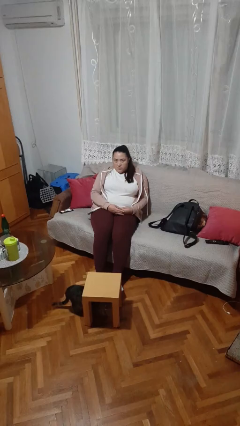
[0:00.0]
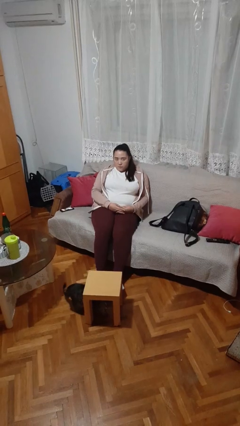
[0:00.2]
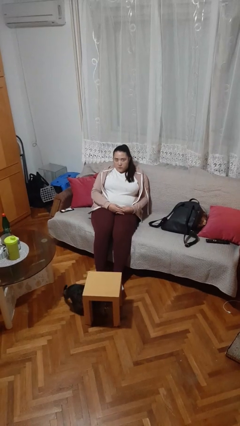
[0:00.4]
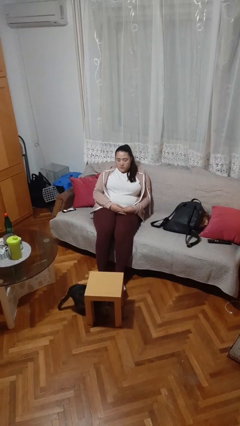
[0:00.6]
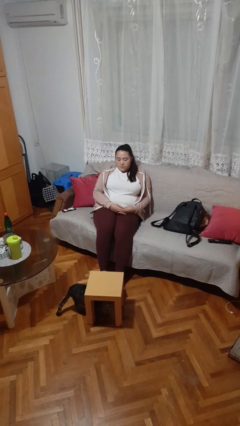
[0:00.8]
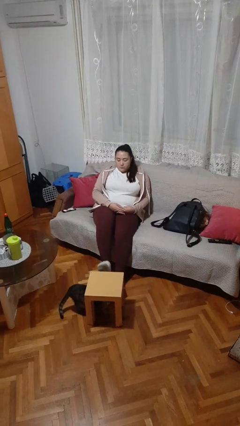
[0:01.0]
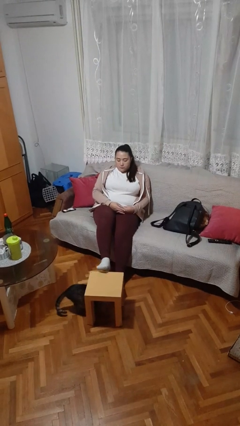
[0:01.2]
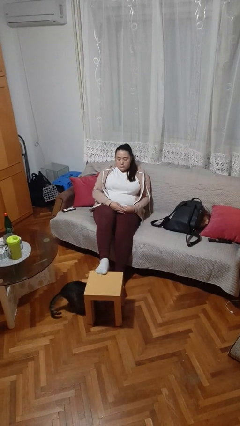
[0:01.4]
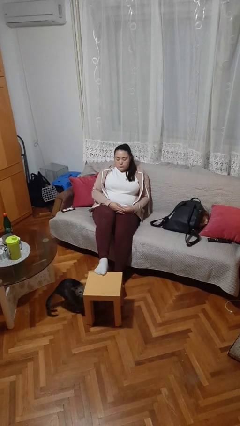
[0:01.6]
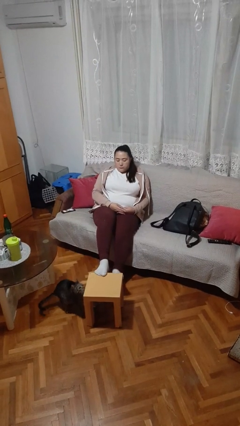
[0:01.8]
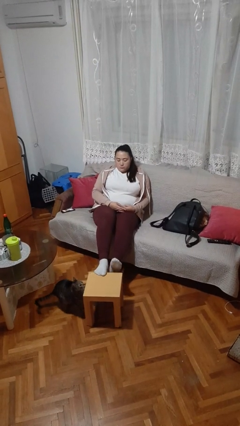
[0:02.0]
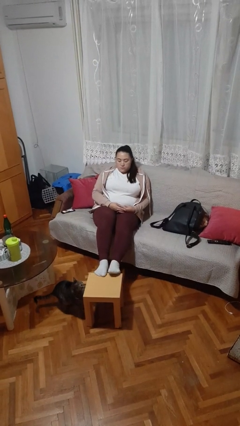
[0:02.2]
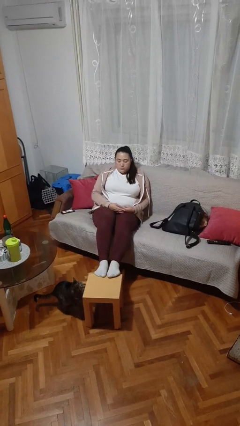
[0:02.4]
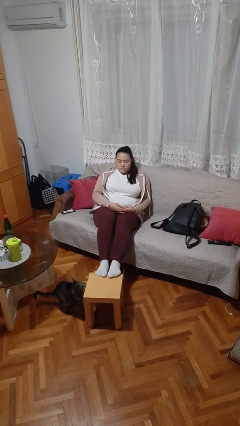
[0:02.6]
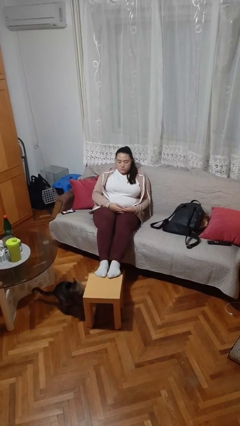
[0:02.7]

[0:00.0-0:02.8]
person puts feet up

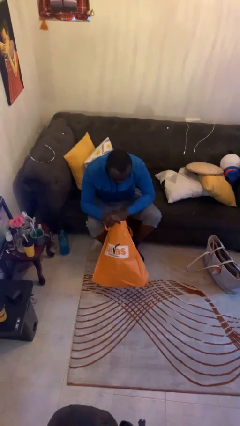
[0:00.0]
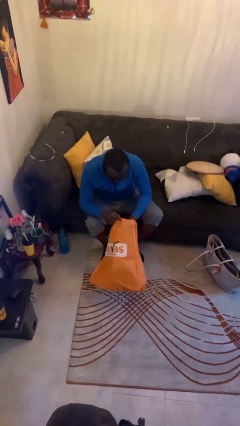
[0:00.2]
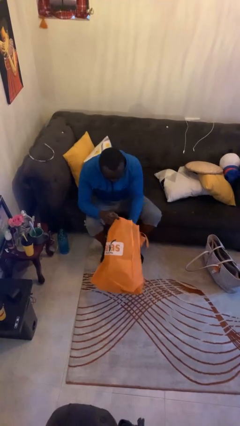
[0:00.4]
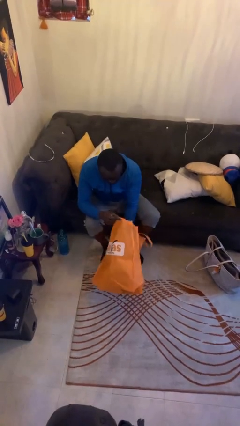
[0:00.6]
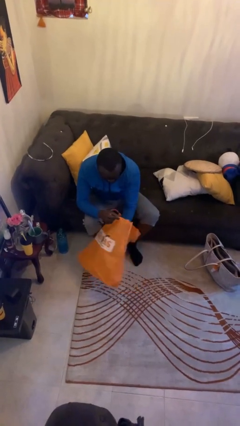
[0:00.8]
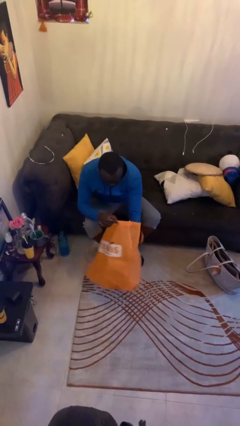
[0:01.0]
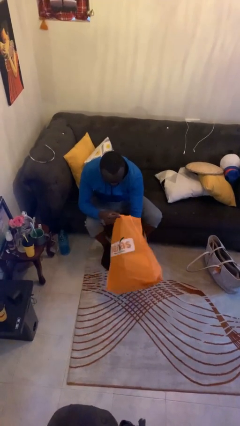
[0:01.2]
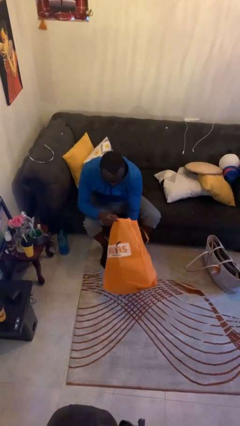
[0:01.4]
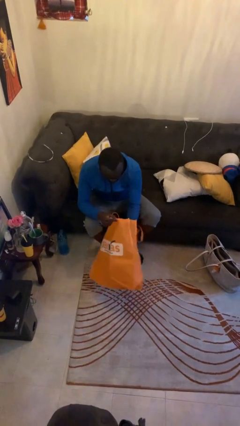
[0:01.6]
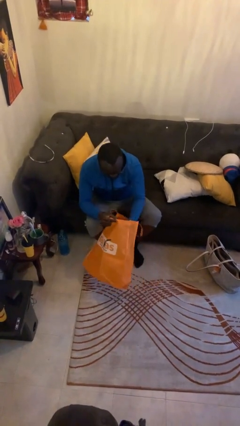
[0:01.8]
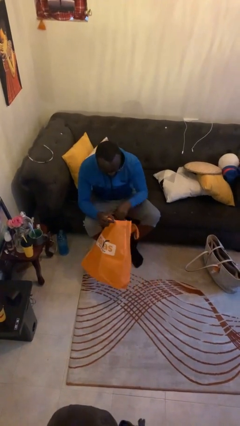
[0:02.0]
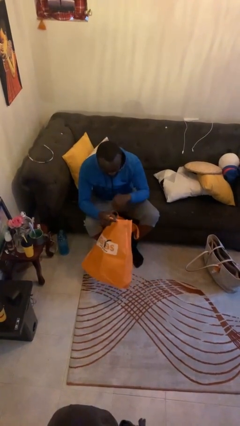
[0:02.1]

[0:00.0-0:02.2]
person searches in bag

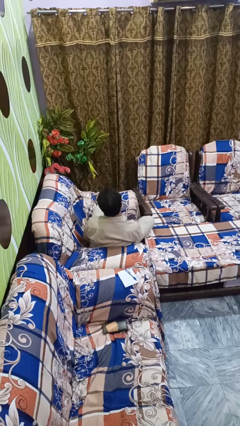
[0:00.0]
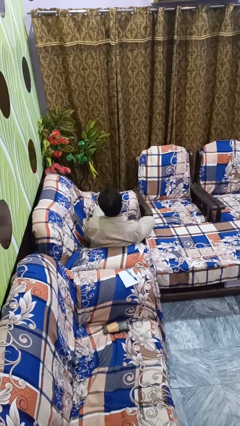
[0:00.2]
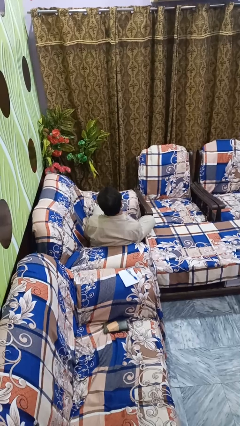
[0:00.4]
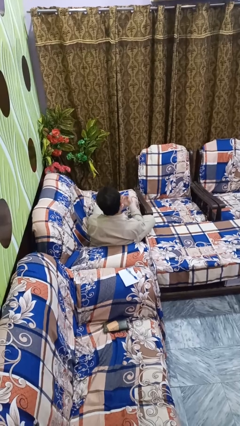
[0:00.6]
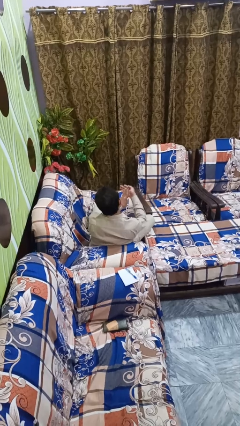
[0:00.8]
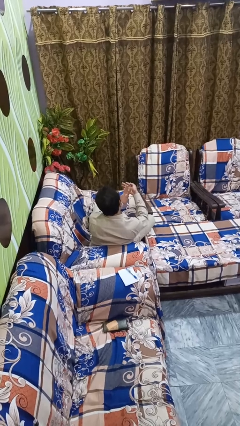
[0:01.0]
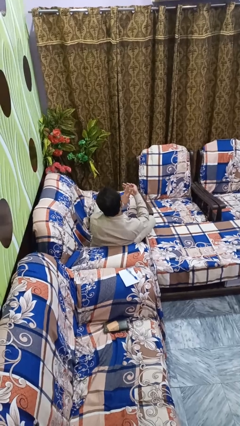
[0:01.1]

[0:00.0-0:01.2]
person gestures number three

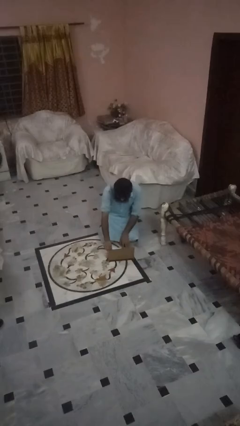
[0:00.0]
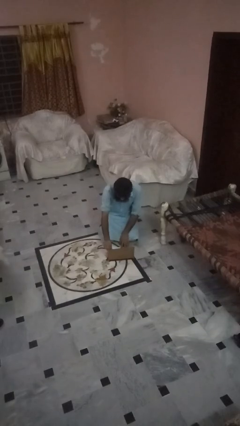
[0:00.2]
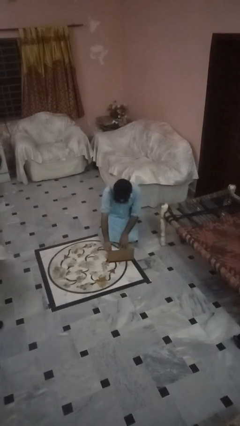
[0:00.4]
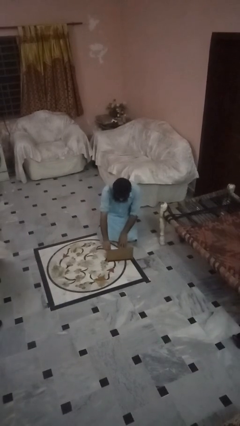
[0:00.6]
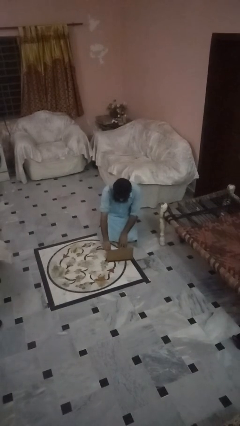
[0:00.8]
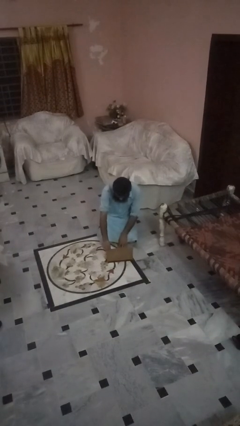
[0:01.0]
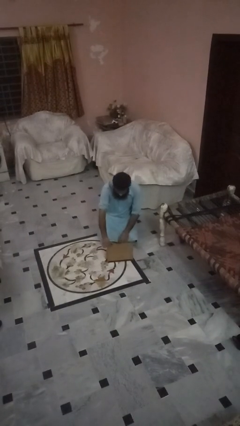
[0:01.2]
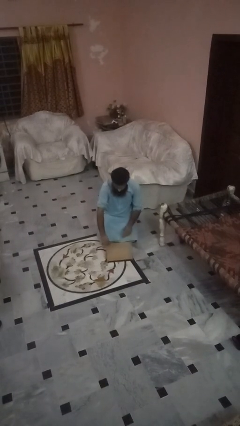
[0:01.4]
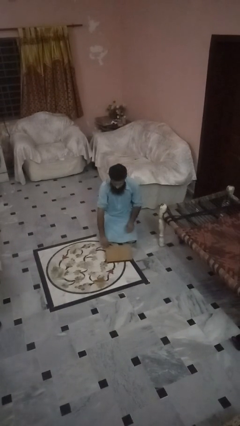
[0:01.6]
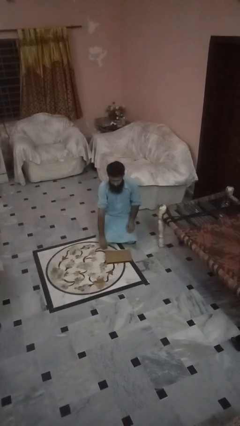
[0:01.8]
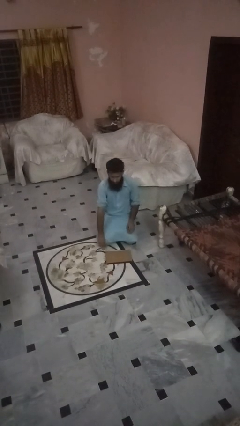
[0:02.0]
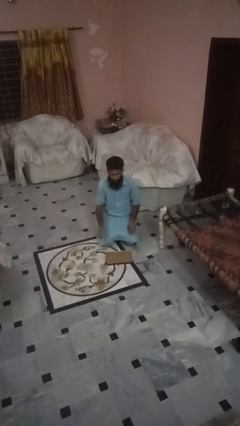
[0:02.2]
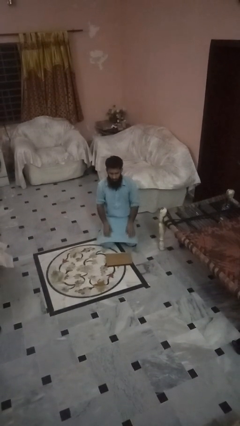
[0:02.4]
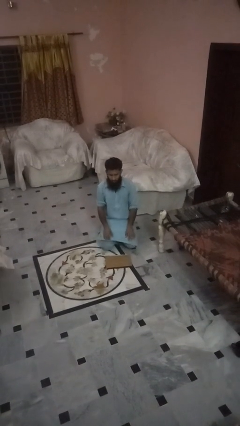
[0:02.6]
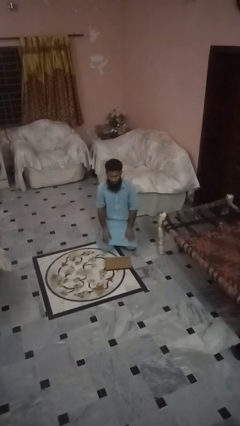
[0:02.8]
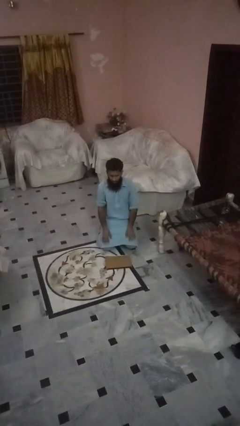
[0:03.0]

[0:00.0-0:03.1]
person closes laptop

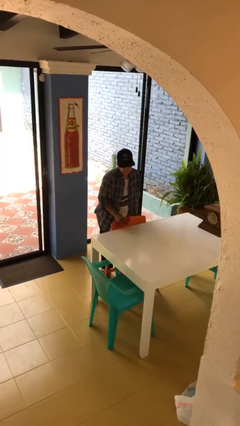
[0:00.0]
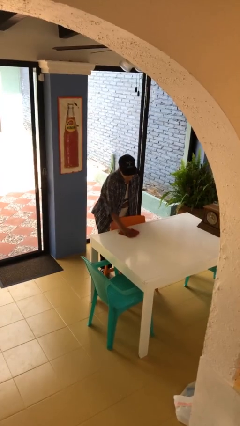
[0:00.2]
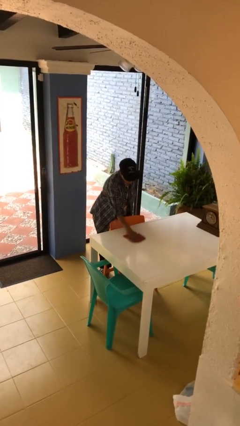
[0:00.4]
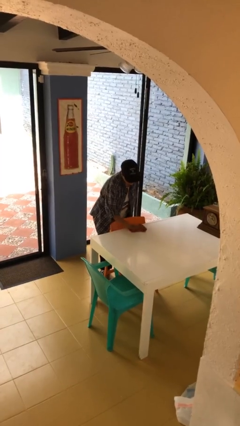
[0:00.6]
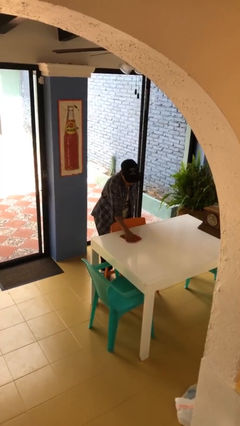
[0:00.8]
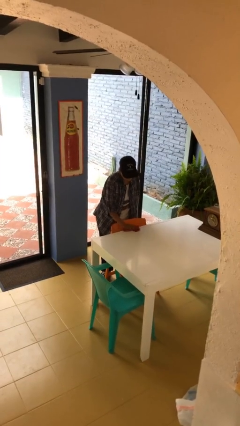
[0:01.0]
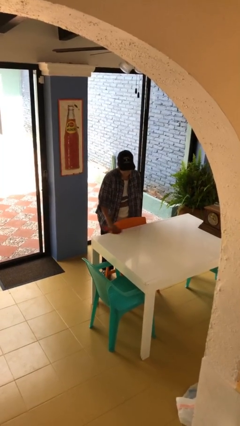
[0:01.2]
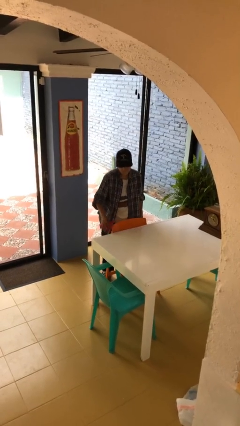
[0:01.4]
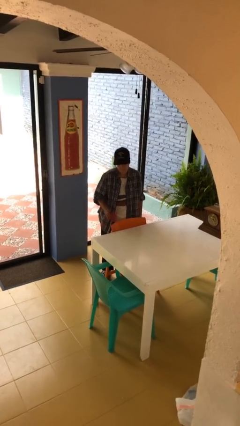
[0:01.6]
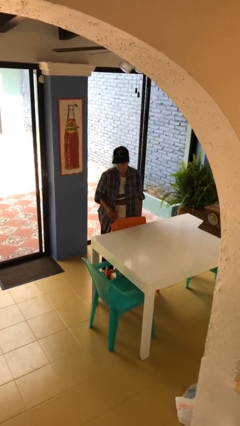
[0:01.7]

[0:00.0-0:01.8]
person cleans table with rag

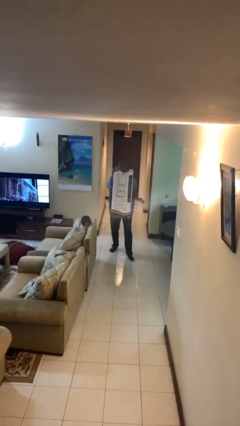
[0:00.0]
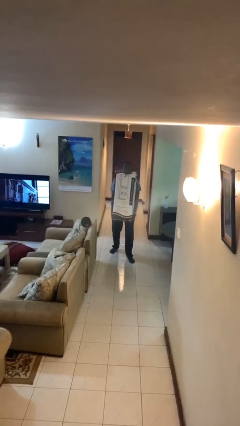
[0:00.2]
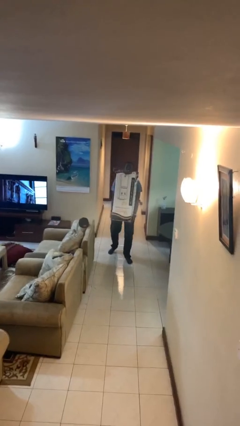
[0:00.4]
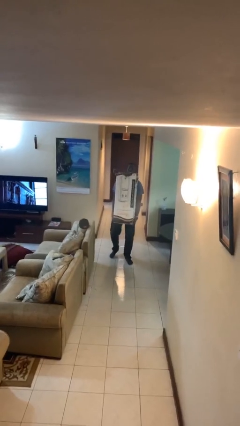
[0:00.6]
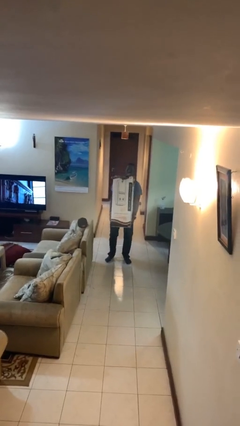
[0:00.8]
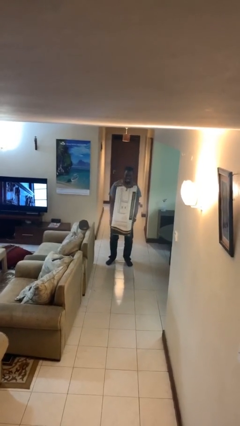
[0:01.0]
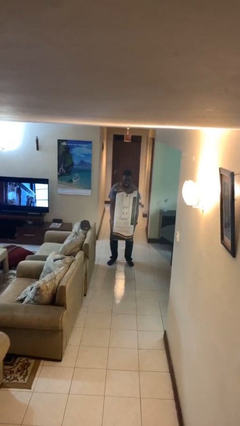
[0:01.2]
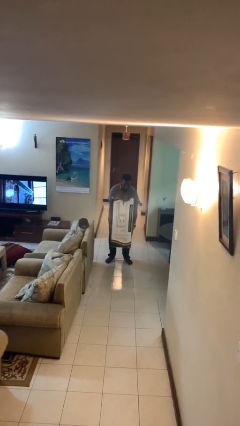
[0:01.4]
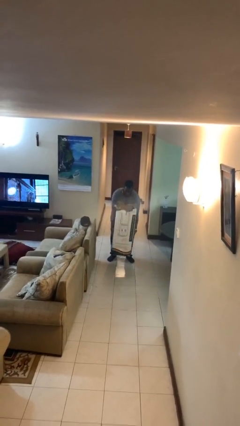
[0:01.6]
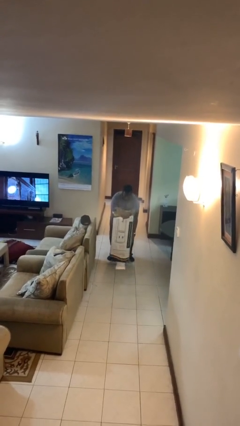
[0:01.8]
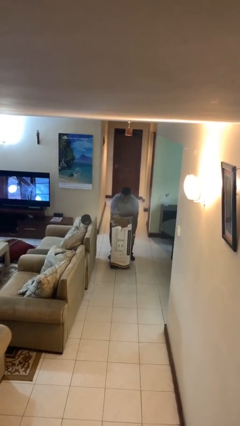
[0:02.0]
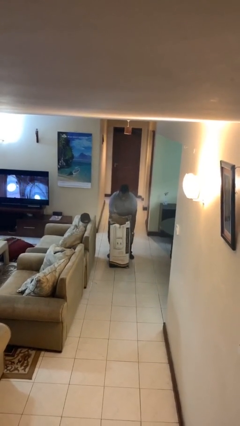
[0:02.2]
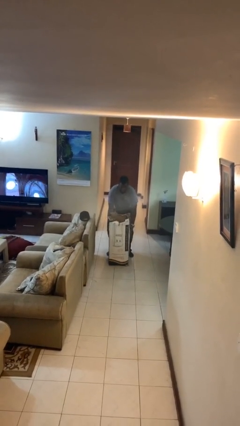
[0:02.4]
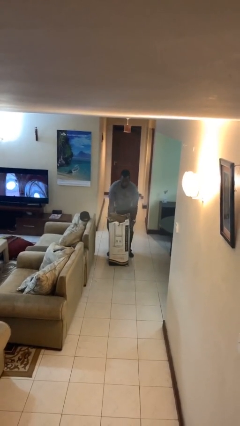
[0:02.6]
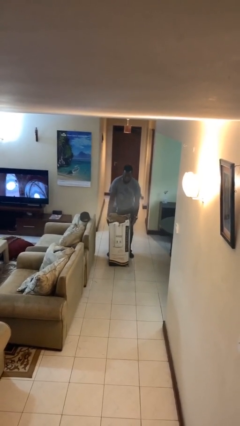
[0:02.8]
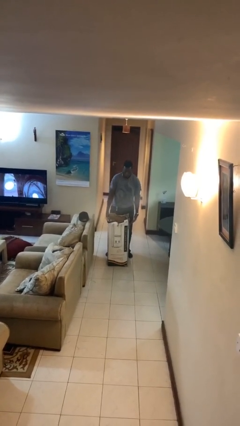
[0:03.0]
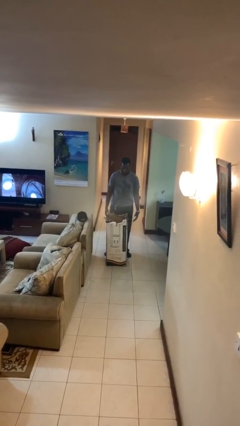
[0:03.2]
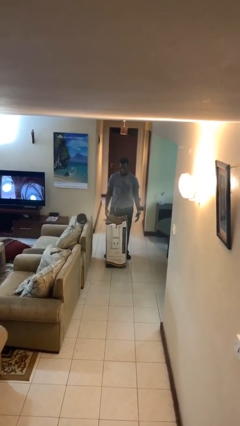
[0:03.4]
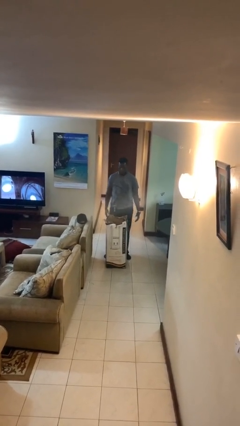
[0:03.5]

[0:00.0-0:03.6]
person puts down object on floor

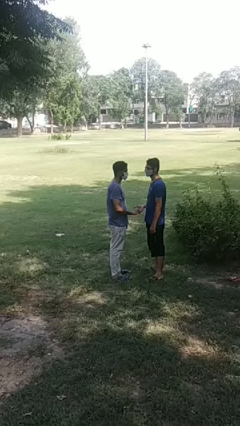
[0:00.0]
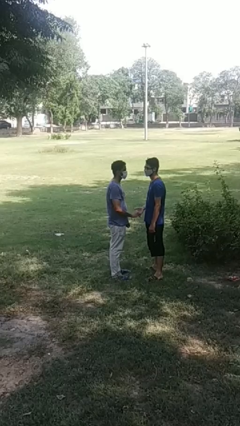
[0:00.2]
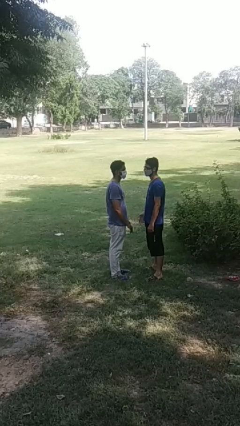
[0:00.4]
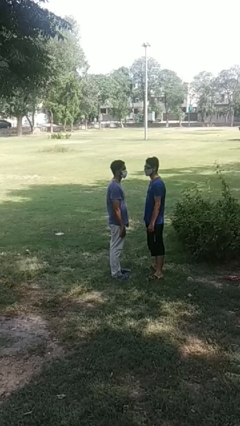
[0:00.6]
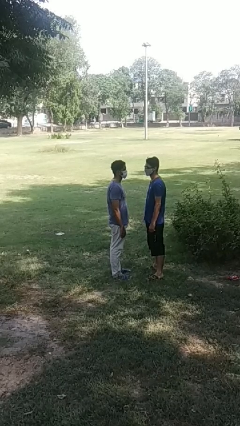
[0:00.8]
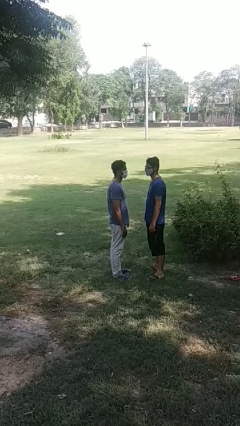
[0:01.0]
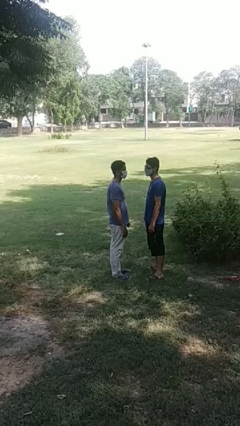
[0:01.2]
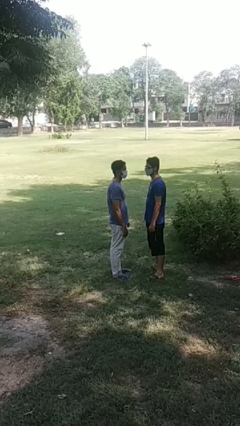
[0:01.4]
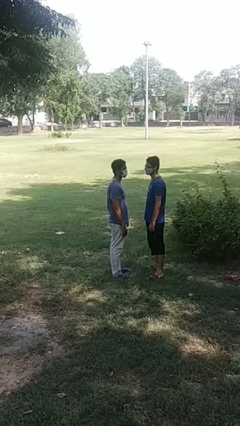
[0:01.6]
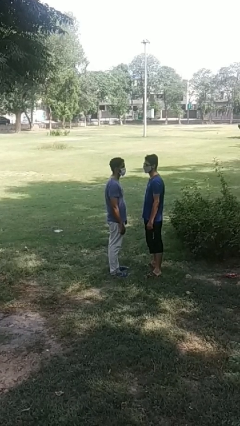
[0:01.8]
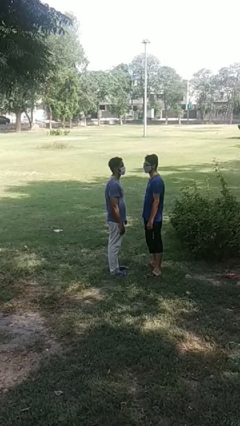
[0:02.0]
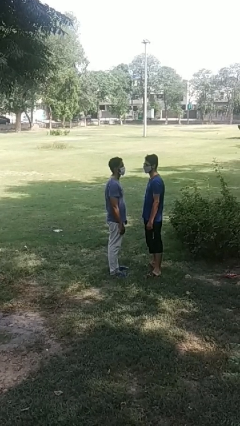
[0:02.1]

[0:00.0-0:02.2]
person highfives hand
